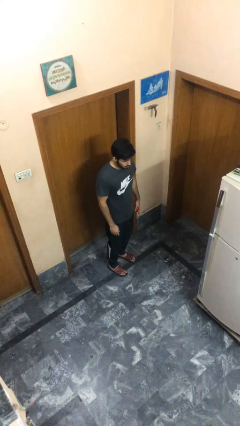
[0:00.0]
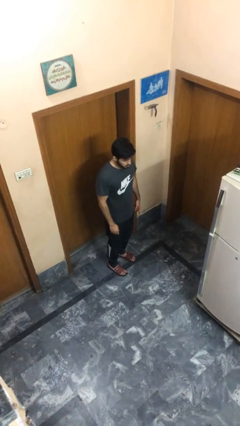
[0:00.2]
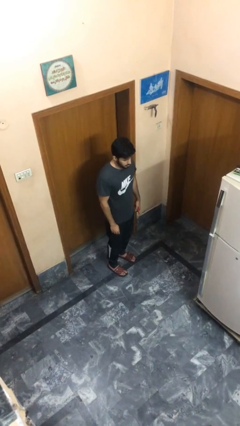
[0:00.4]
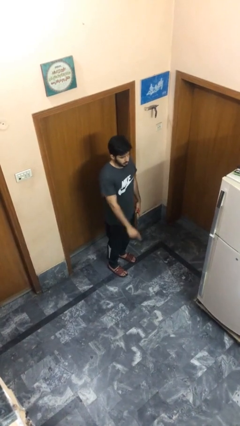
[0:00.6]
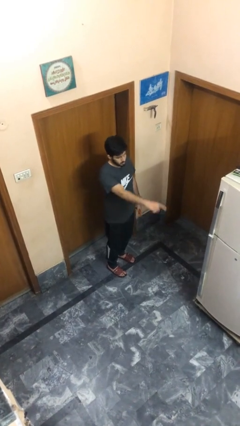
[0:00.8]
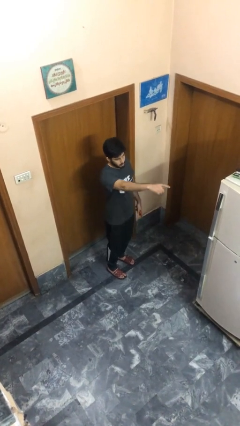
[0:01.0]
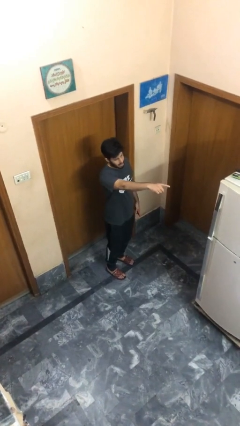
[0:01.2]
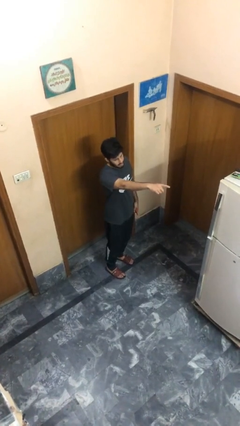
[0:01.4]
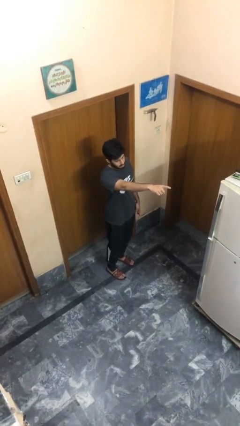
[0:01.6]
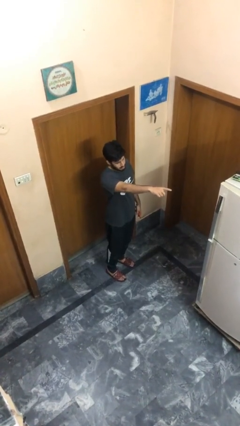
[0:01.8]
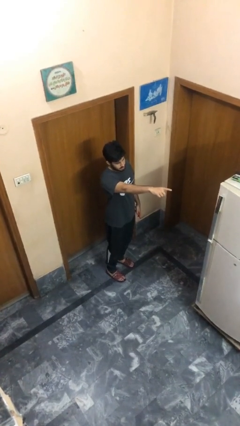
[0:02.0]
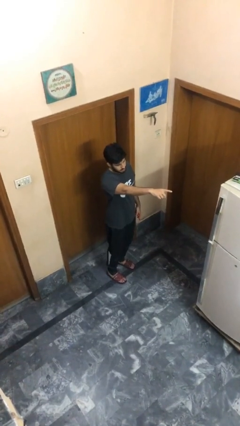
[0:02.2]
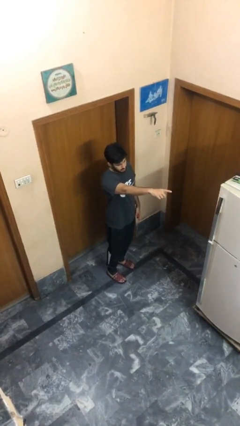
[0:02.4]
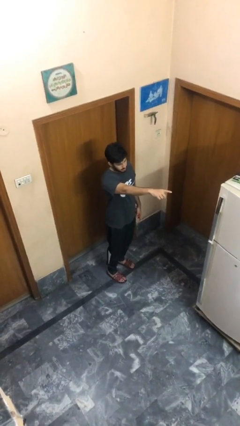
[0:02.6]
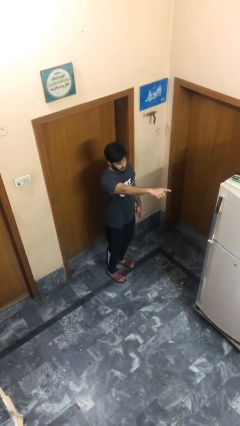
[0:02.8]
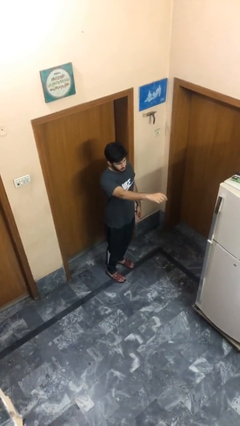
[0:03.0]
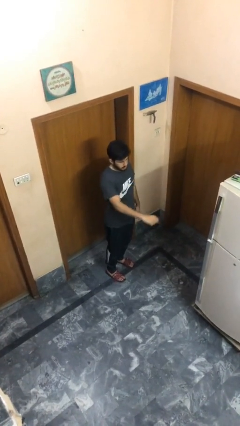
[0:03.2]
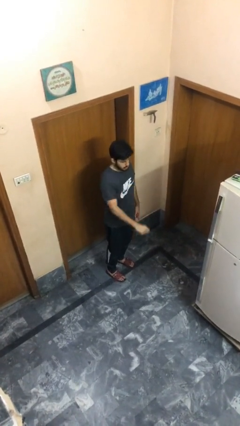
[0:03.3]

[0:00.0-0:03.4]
person points at person

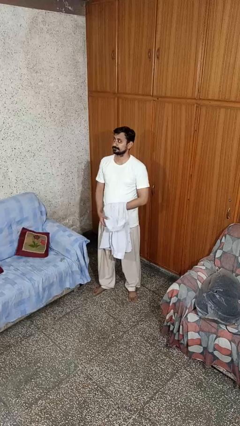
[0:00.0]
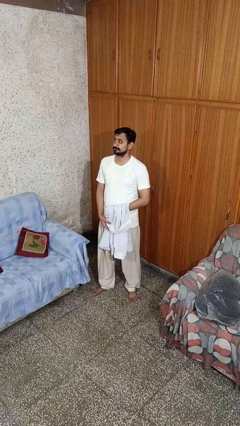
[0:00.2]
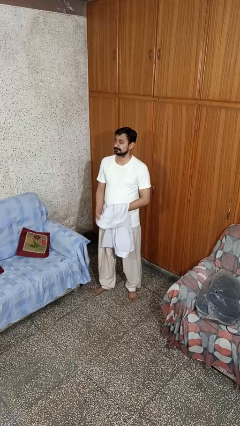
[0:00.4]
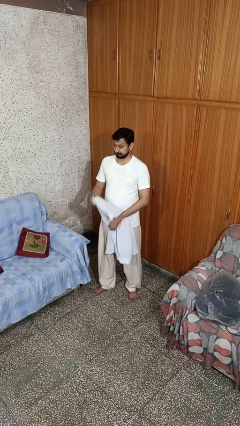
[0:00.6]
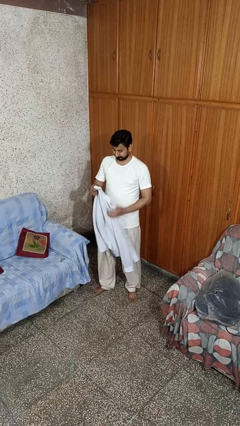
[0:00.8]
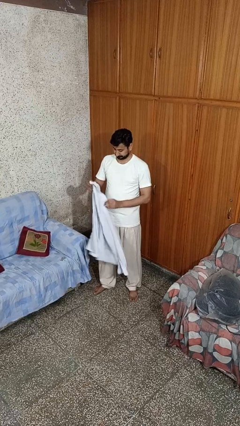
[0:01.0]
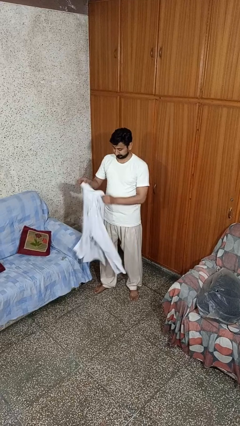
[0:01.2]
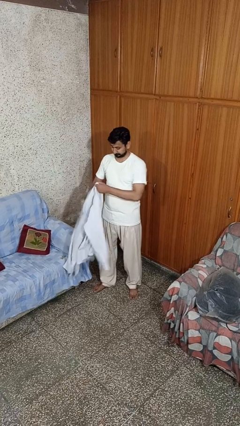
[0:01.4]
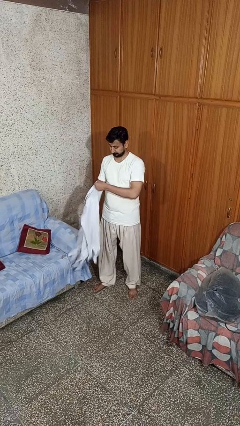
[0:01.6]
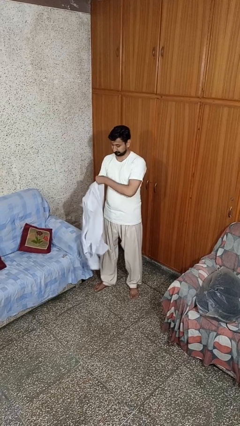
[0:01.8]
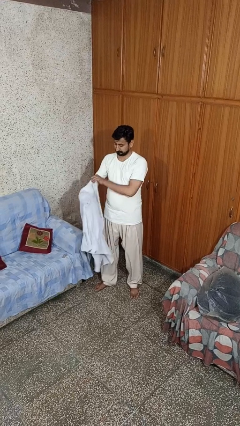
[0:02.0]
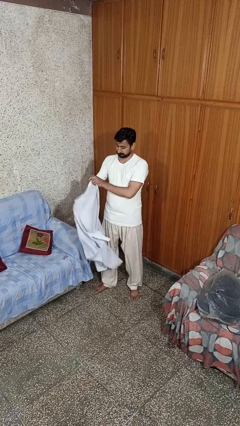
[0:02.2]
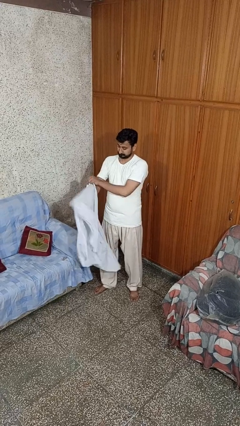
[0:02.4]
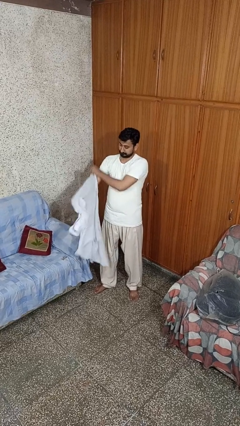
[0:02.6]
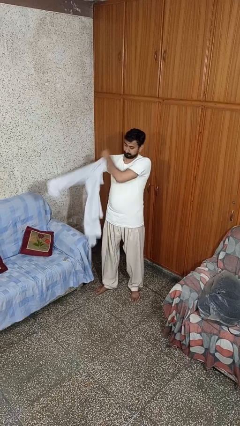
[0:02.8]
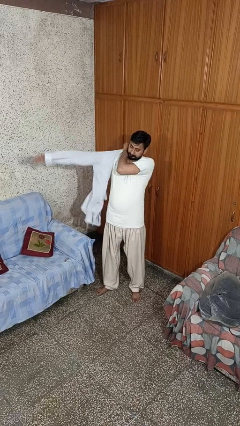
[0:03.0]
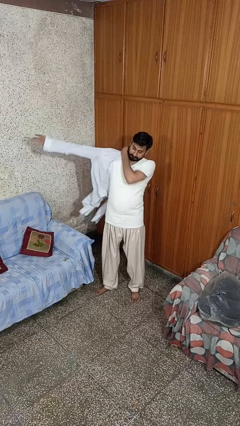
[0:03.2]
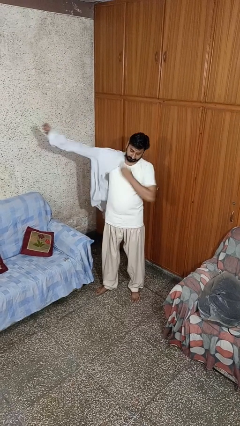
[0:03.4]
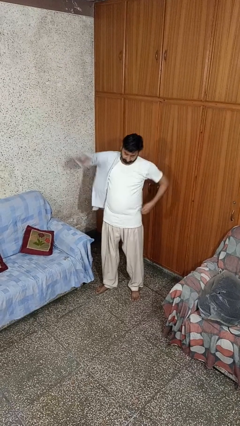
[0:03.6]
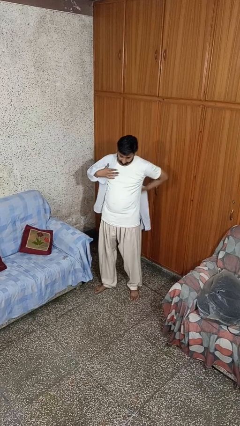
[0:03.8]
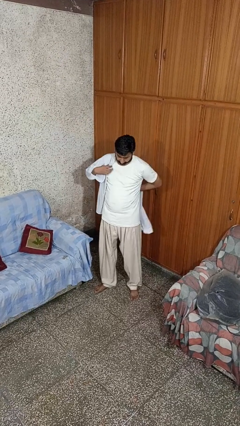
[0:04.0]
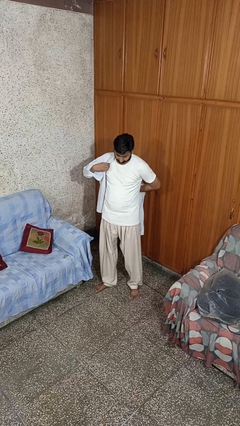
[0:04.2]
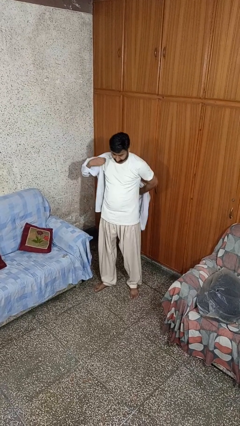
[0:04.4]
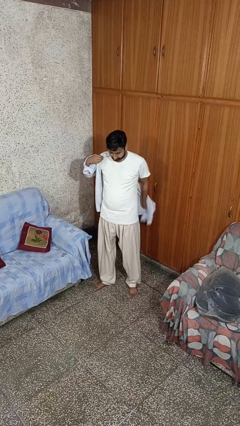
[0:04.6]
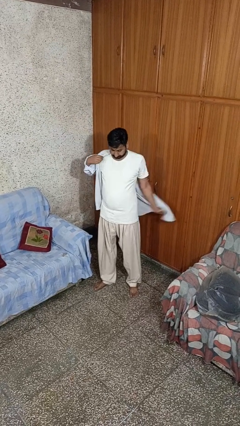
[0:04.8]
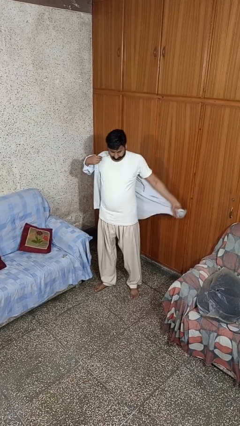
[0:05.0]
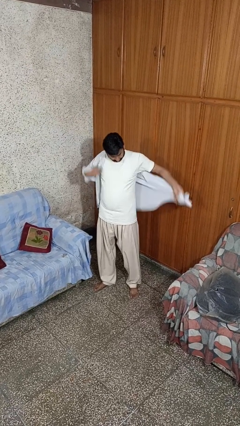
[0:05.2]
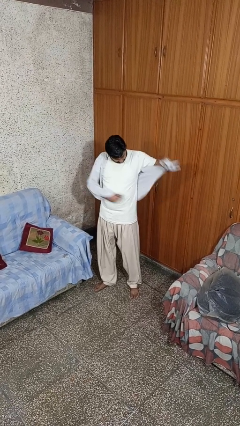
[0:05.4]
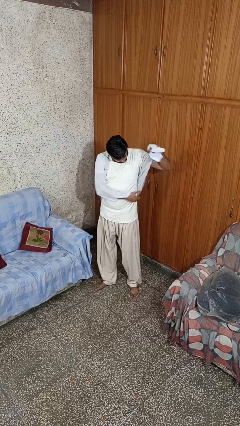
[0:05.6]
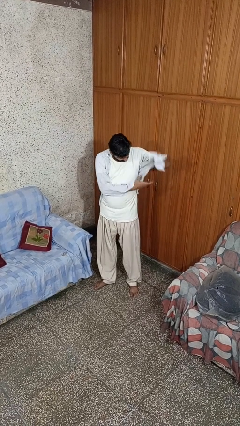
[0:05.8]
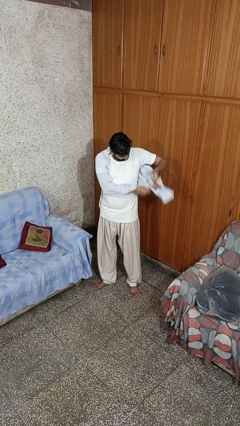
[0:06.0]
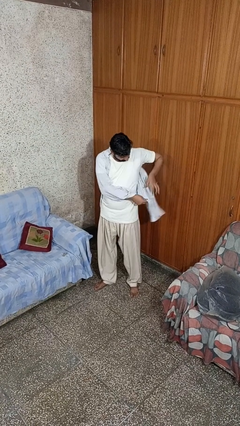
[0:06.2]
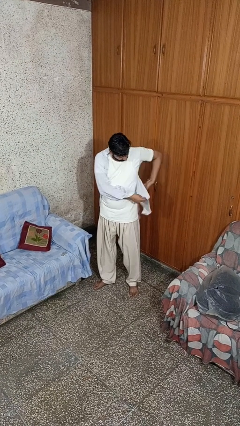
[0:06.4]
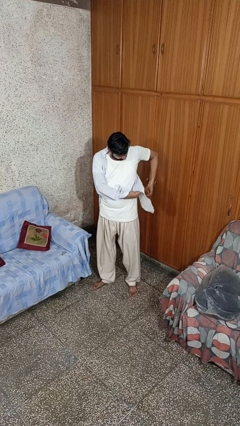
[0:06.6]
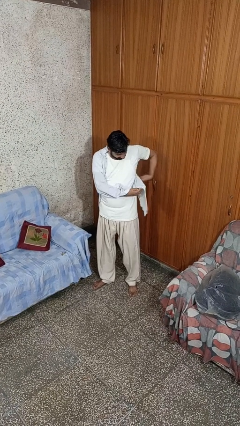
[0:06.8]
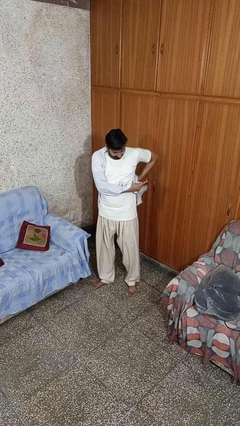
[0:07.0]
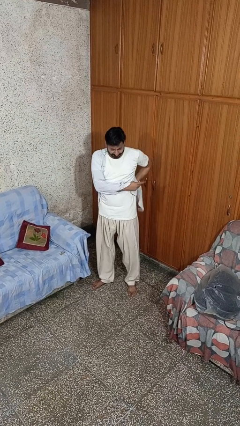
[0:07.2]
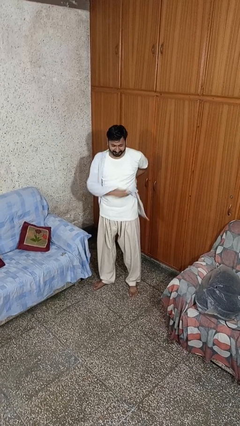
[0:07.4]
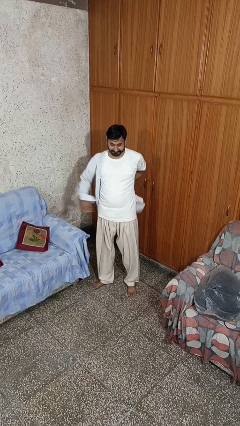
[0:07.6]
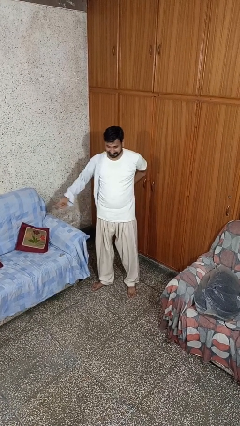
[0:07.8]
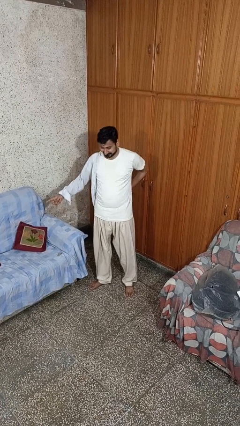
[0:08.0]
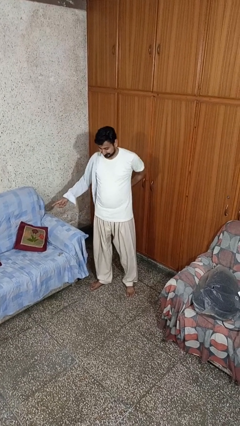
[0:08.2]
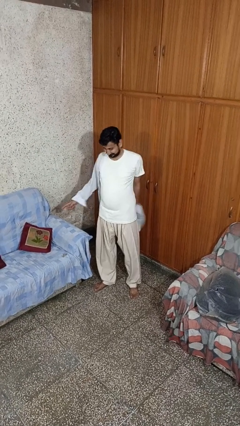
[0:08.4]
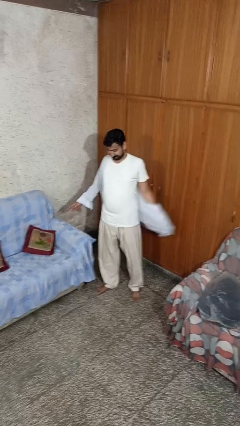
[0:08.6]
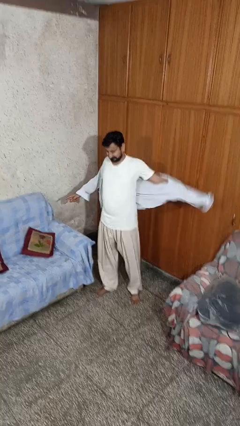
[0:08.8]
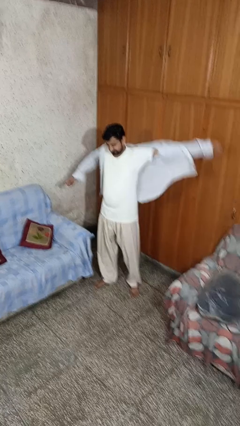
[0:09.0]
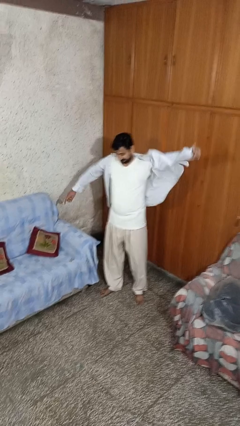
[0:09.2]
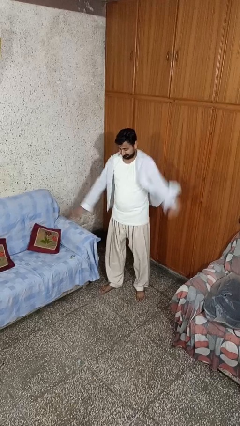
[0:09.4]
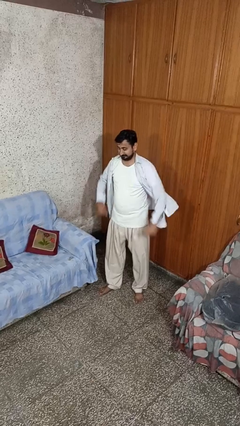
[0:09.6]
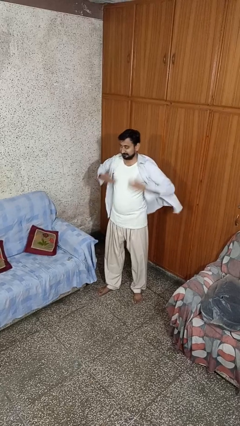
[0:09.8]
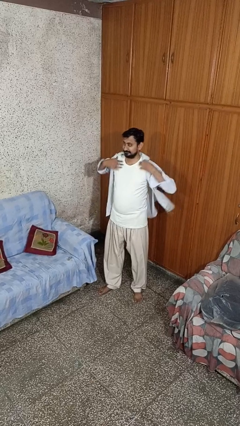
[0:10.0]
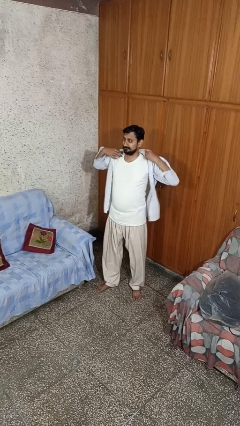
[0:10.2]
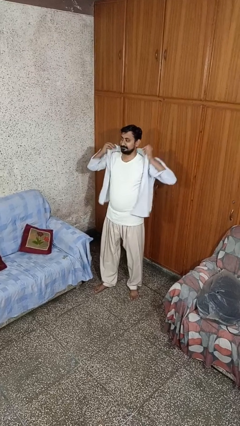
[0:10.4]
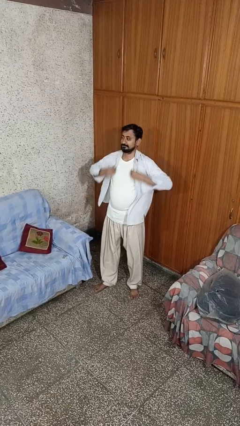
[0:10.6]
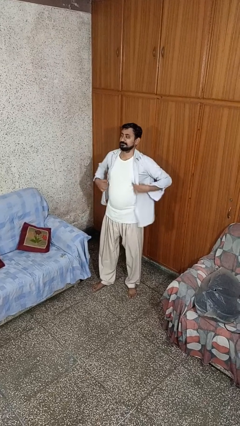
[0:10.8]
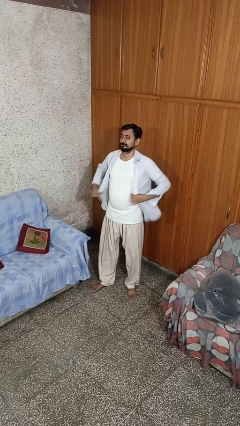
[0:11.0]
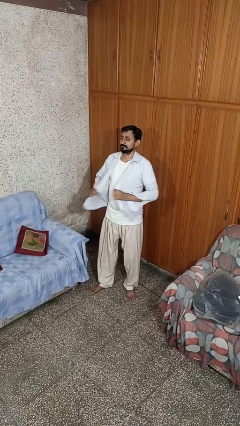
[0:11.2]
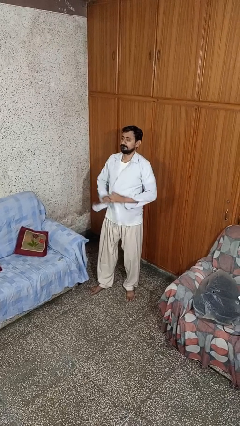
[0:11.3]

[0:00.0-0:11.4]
person puts on shirt

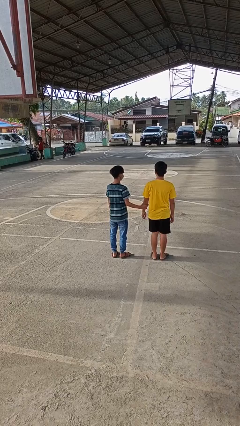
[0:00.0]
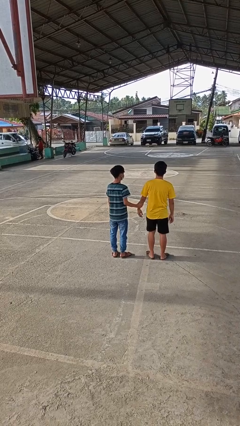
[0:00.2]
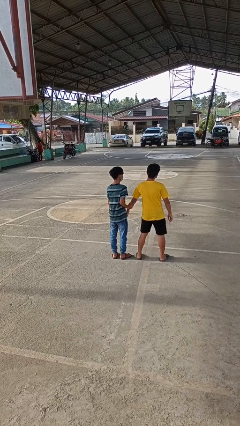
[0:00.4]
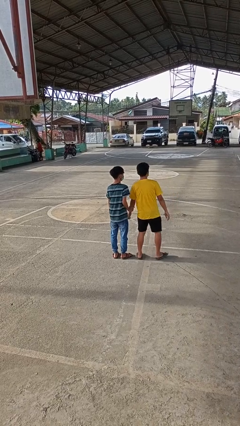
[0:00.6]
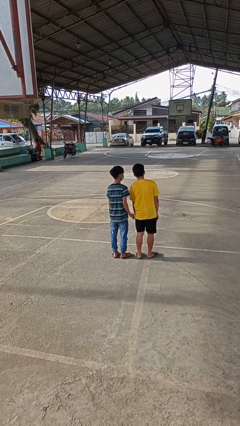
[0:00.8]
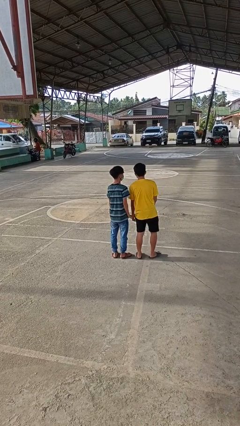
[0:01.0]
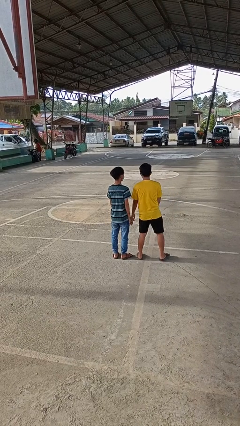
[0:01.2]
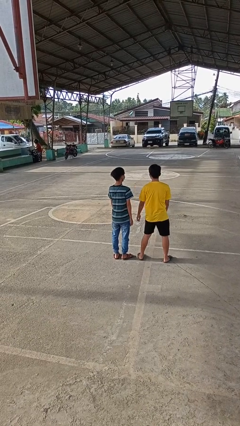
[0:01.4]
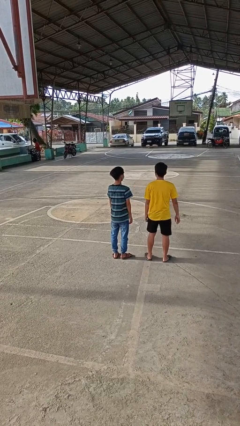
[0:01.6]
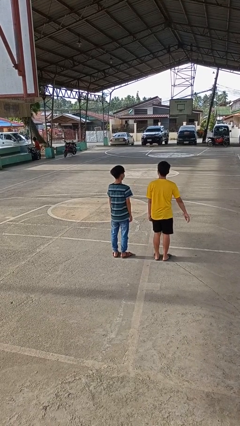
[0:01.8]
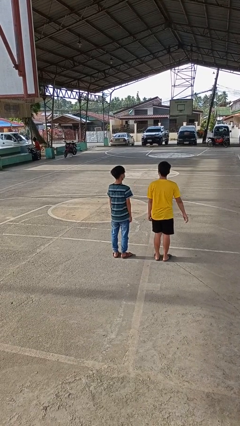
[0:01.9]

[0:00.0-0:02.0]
person grabs person by forearm

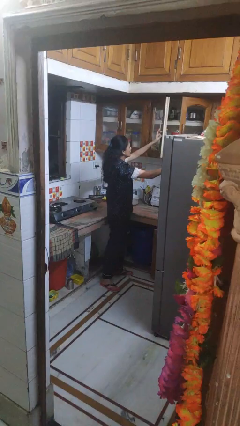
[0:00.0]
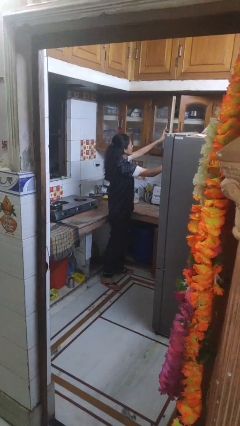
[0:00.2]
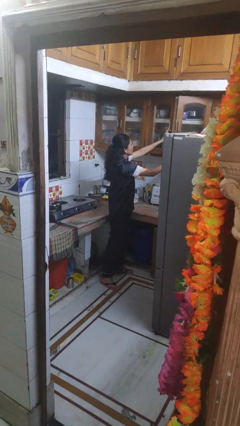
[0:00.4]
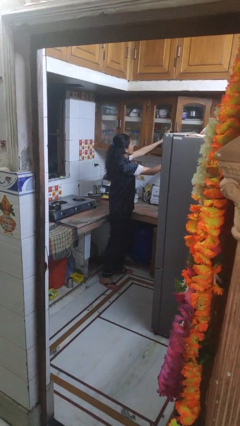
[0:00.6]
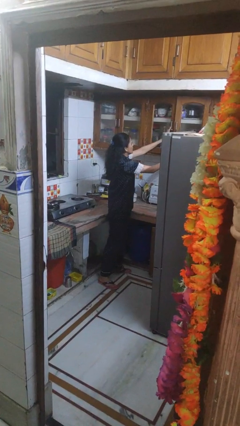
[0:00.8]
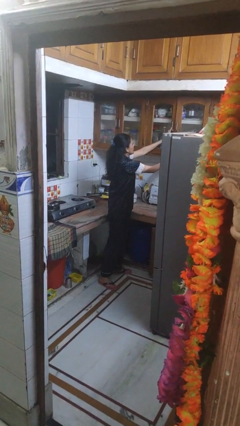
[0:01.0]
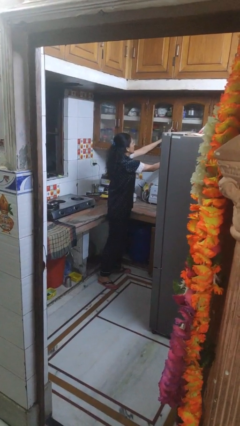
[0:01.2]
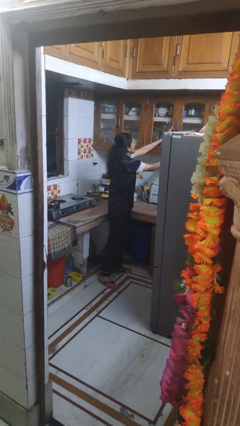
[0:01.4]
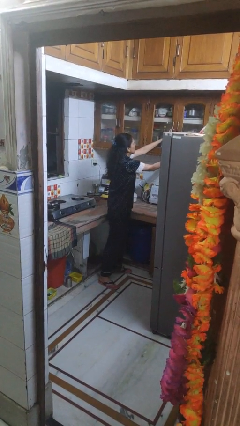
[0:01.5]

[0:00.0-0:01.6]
person closes cabinet
